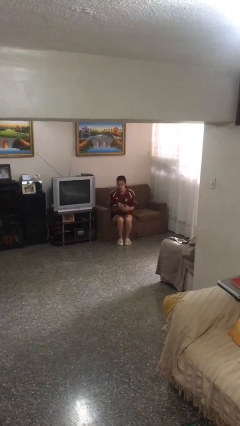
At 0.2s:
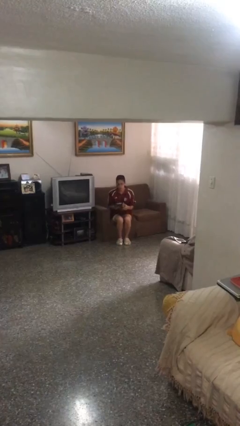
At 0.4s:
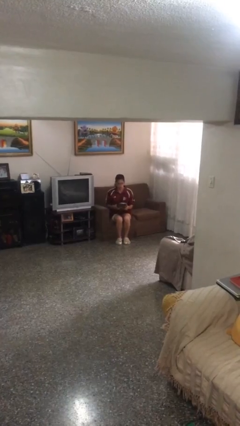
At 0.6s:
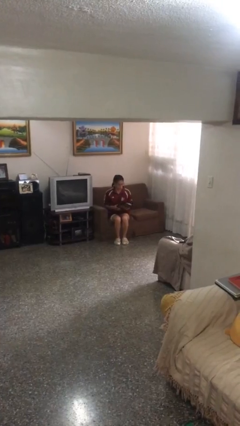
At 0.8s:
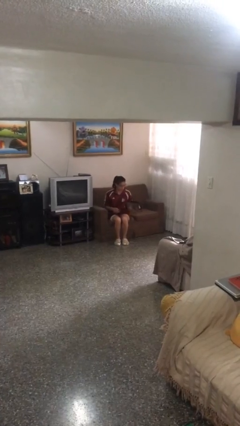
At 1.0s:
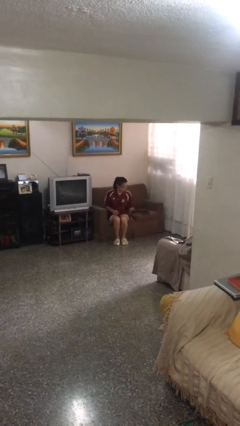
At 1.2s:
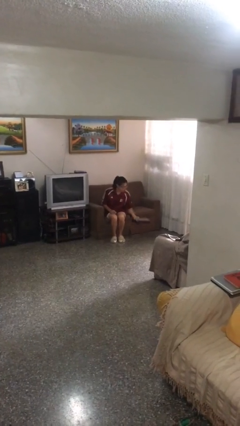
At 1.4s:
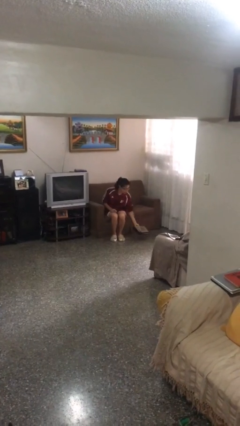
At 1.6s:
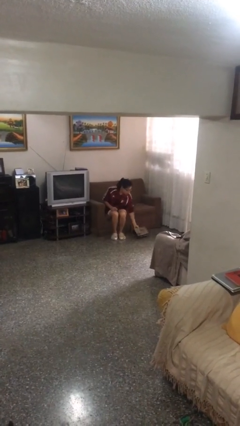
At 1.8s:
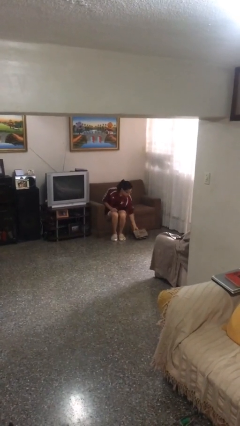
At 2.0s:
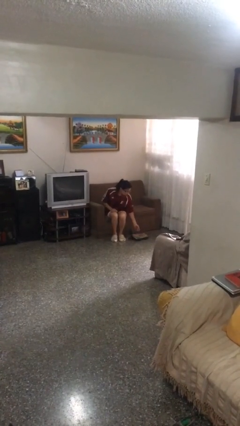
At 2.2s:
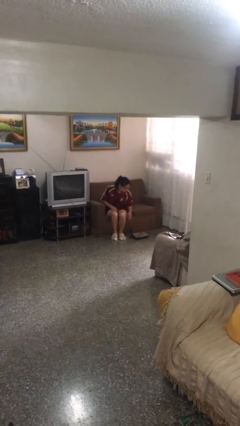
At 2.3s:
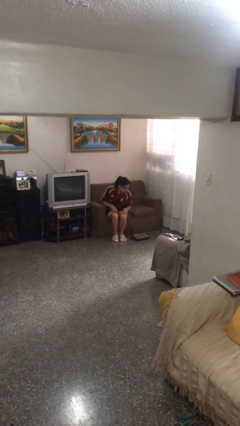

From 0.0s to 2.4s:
person puts down object on floor

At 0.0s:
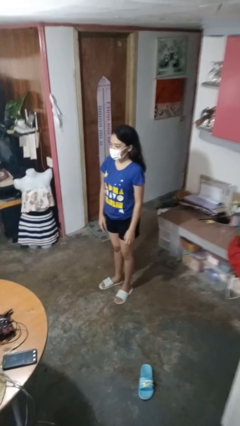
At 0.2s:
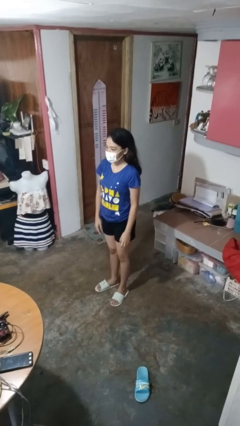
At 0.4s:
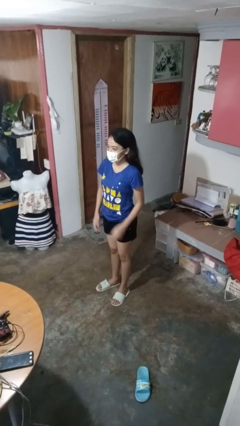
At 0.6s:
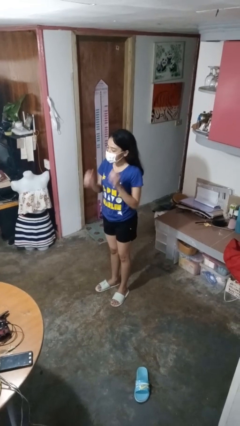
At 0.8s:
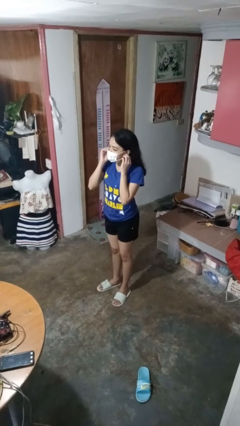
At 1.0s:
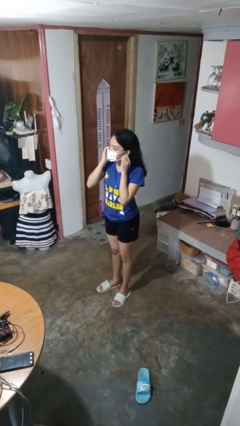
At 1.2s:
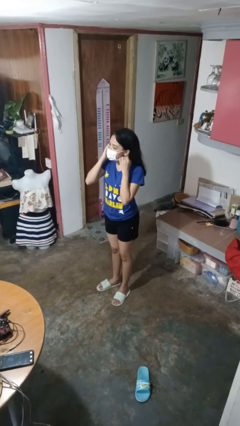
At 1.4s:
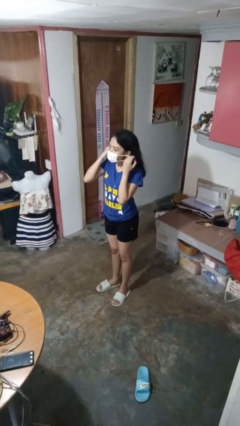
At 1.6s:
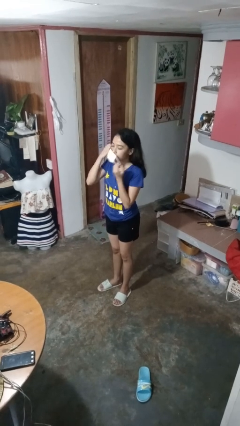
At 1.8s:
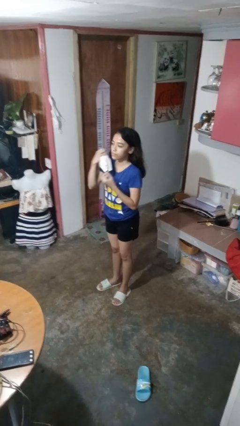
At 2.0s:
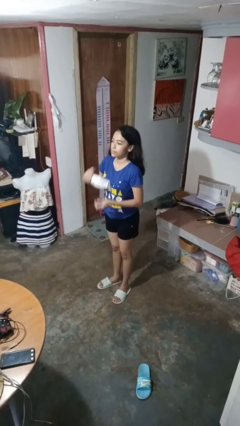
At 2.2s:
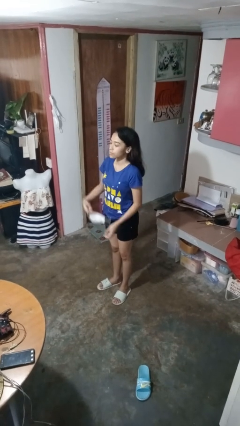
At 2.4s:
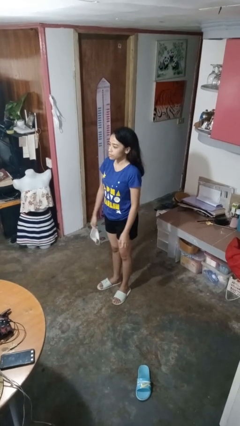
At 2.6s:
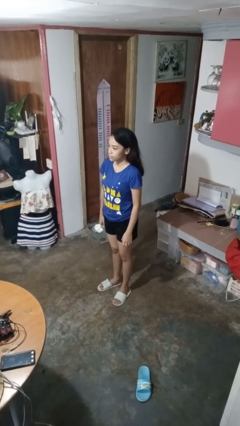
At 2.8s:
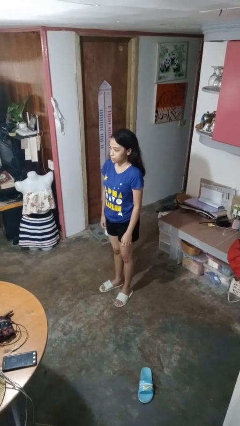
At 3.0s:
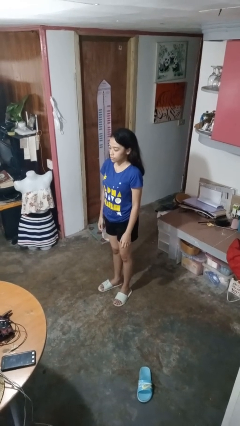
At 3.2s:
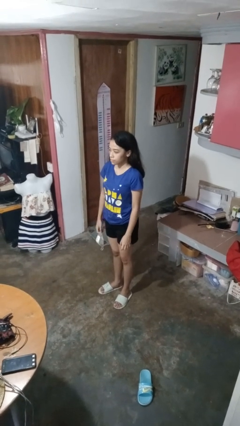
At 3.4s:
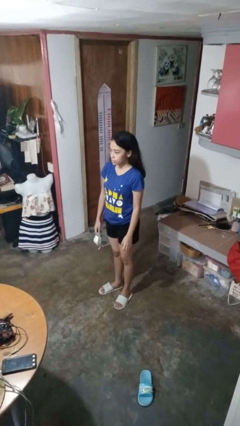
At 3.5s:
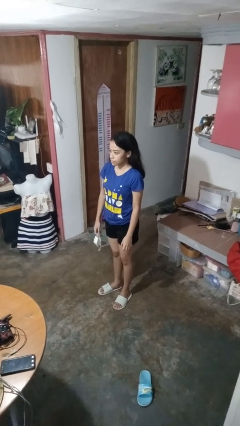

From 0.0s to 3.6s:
person takes off facemask

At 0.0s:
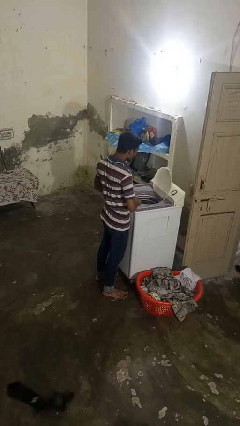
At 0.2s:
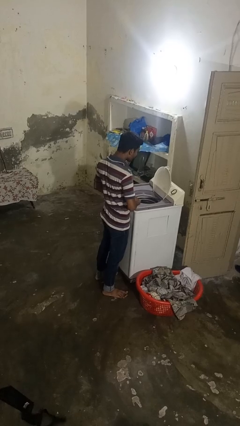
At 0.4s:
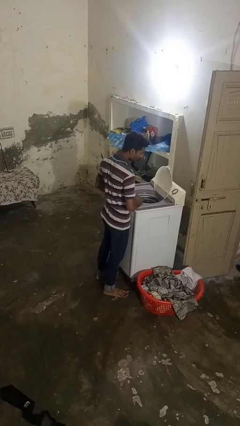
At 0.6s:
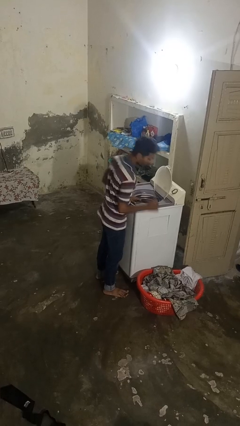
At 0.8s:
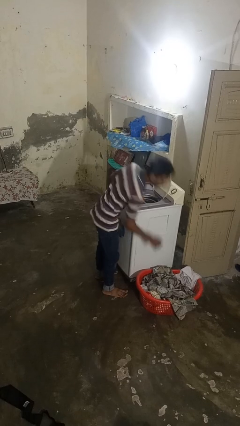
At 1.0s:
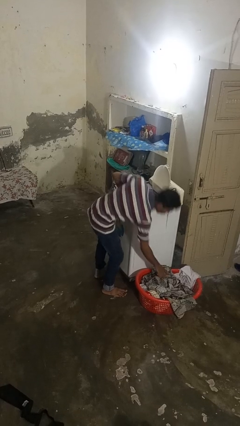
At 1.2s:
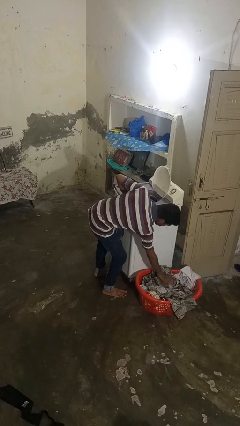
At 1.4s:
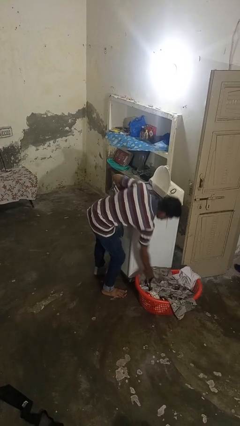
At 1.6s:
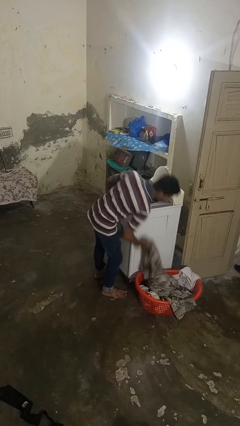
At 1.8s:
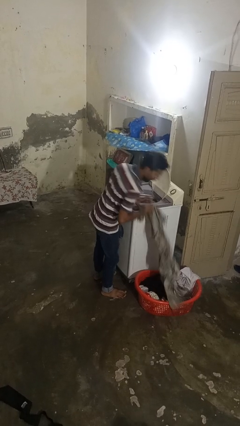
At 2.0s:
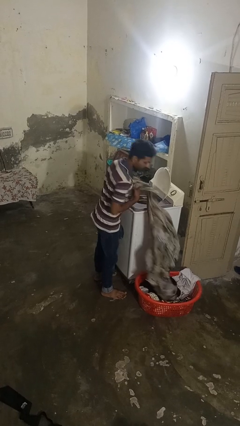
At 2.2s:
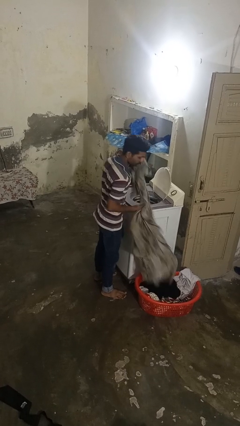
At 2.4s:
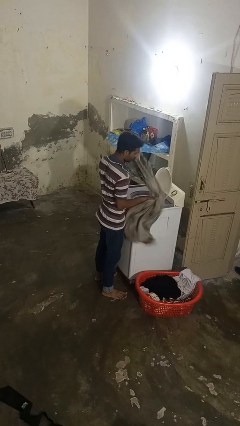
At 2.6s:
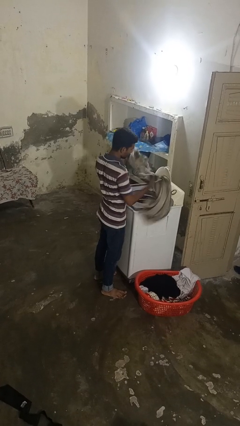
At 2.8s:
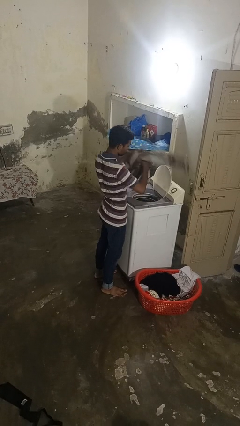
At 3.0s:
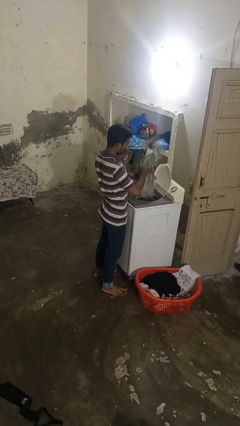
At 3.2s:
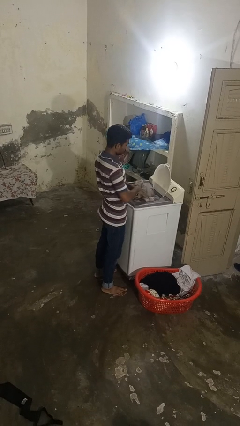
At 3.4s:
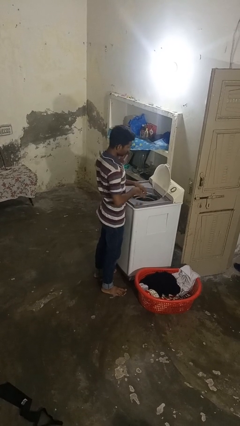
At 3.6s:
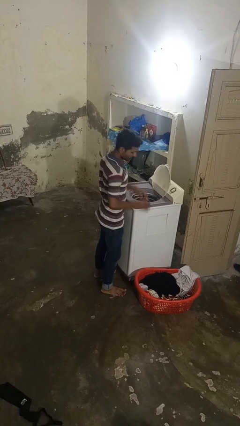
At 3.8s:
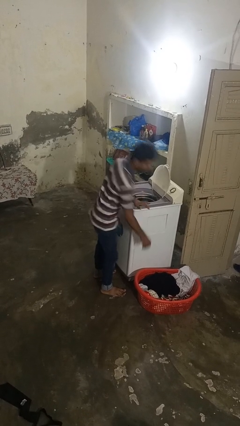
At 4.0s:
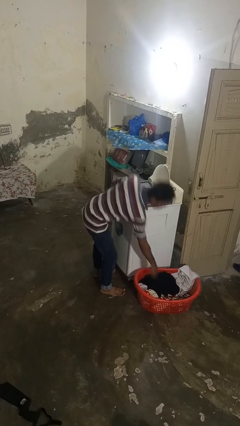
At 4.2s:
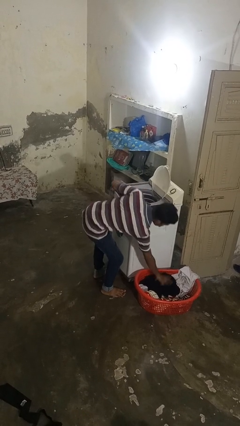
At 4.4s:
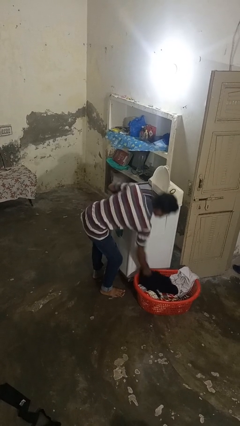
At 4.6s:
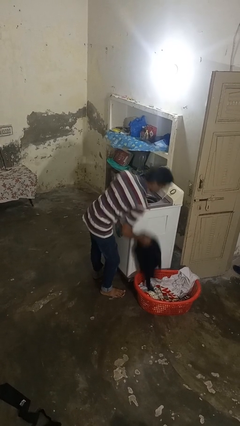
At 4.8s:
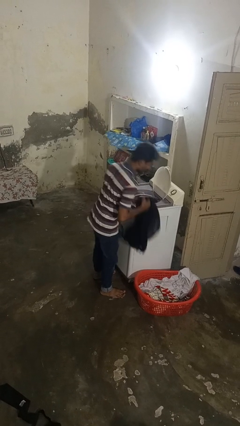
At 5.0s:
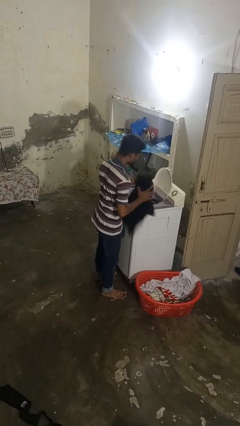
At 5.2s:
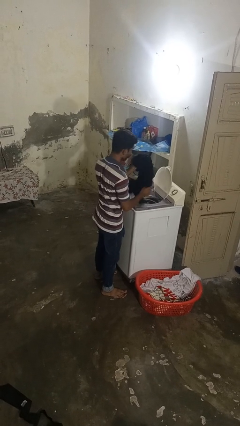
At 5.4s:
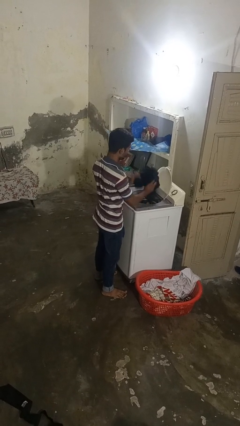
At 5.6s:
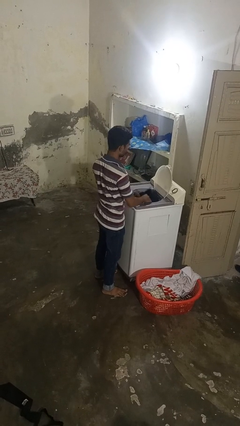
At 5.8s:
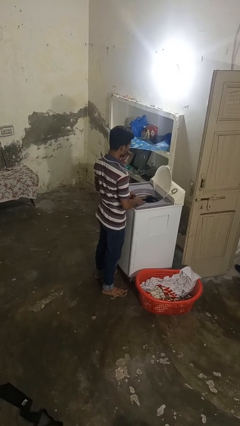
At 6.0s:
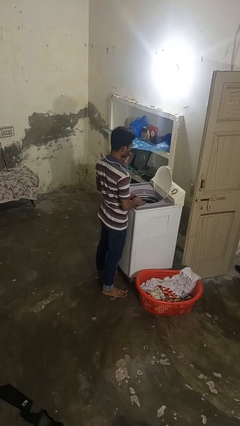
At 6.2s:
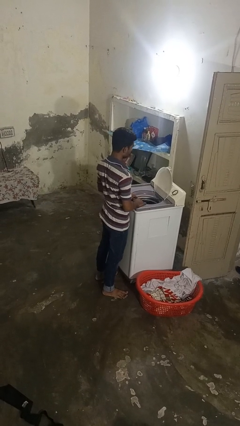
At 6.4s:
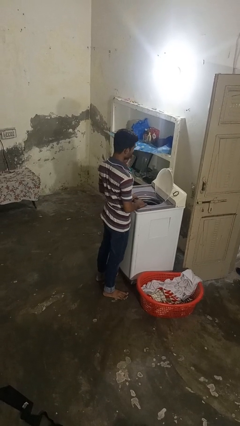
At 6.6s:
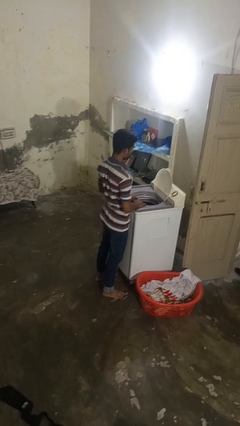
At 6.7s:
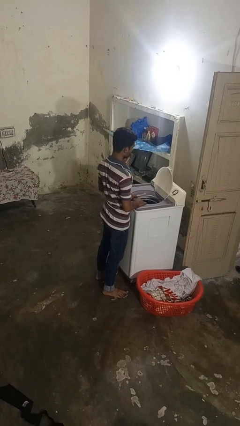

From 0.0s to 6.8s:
person loads dryer

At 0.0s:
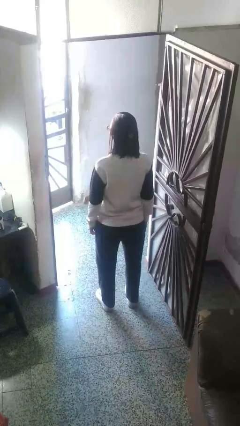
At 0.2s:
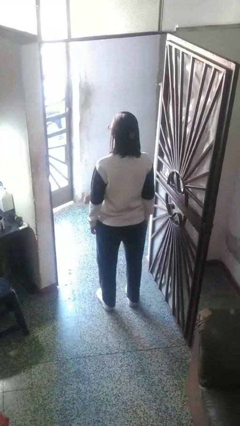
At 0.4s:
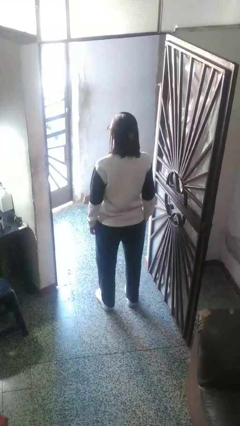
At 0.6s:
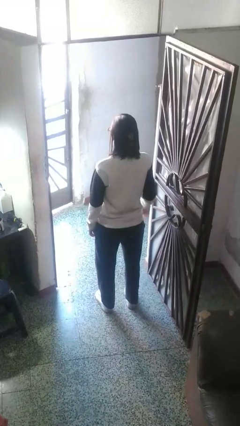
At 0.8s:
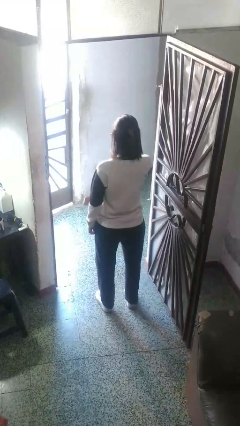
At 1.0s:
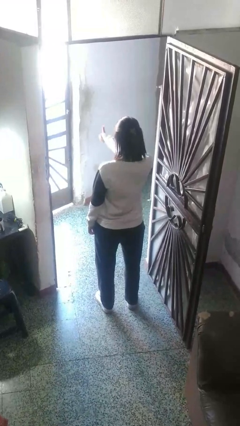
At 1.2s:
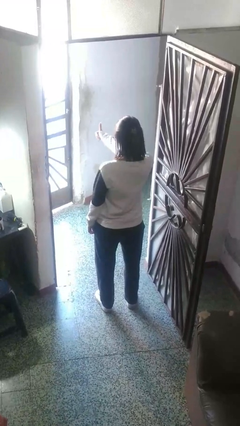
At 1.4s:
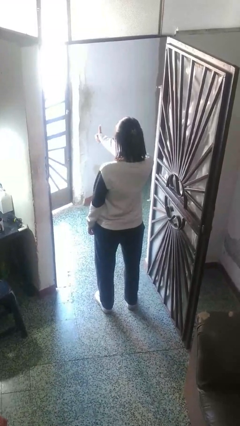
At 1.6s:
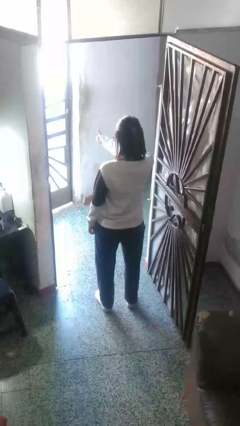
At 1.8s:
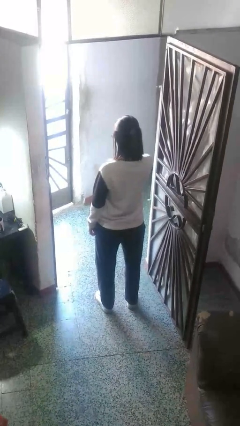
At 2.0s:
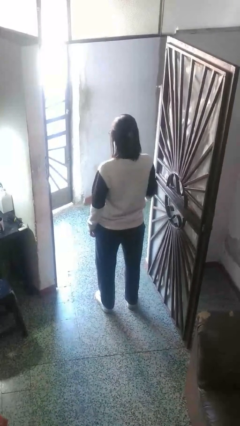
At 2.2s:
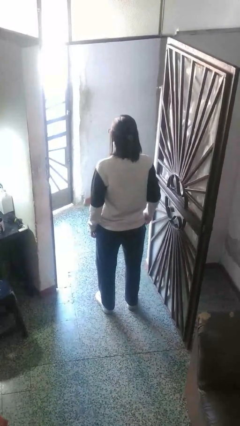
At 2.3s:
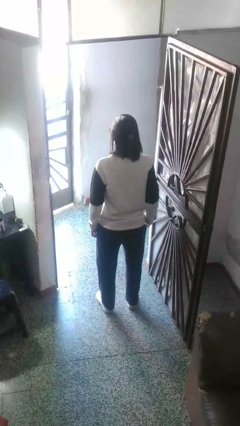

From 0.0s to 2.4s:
person gestures thumbs up

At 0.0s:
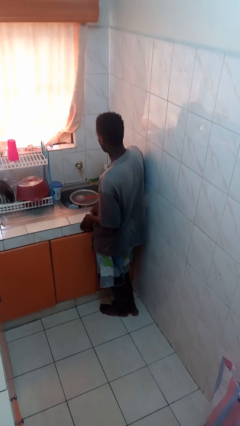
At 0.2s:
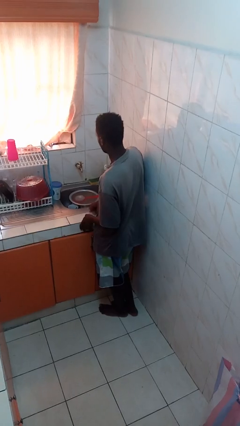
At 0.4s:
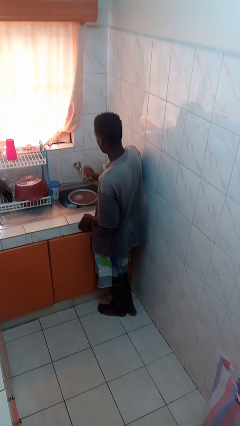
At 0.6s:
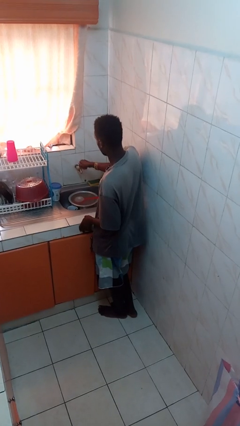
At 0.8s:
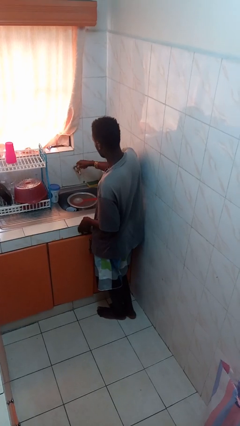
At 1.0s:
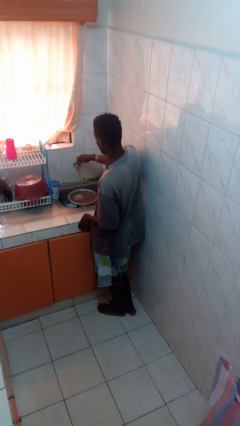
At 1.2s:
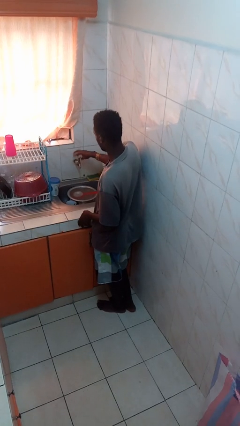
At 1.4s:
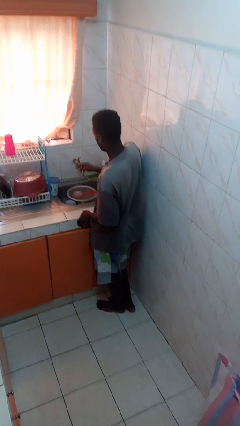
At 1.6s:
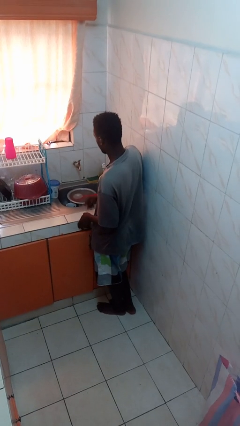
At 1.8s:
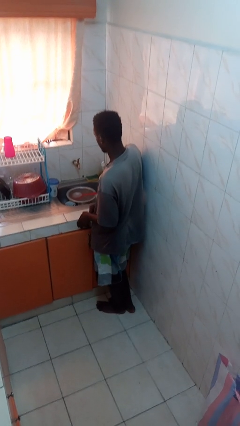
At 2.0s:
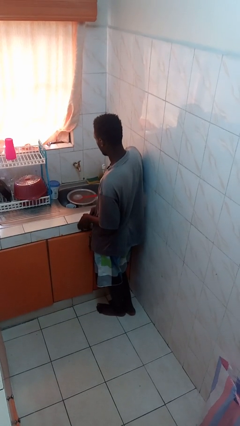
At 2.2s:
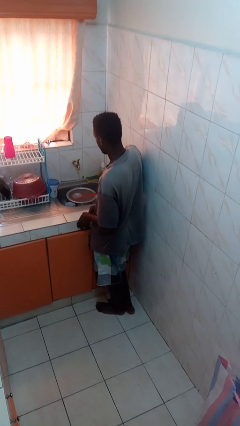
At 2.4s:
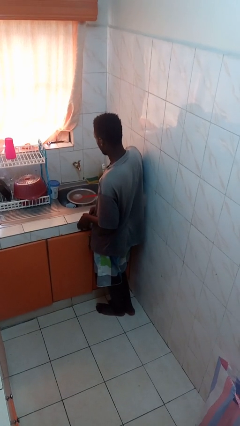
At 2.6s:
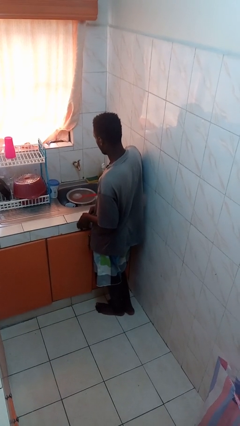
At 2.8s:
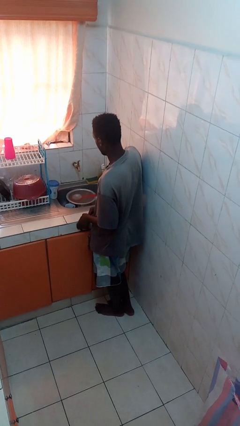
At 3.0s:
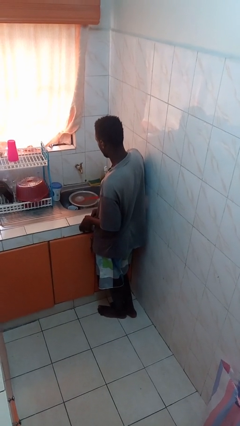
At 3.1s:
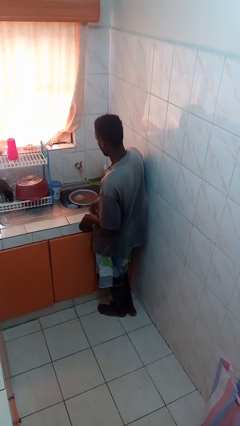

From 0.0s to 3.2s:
person turns on faucet
